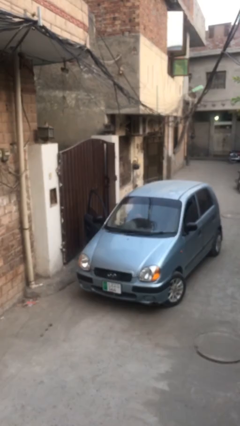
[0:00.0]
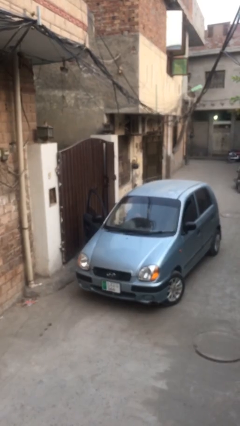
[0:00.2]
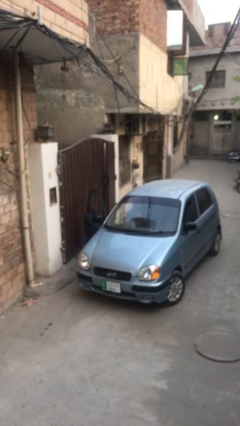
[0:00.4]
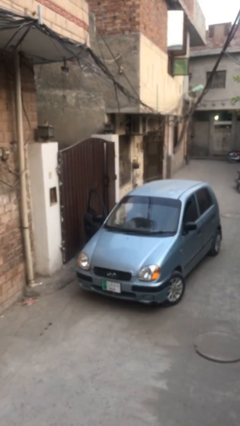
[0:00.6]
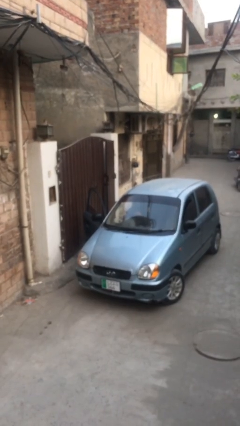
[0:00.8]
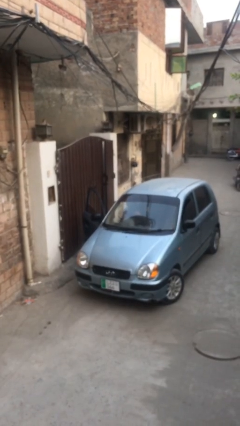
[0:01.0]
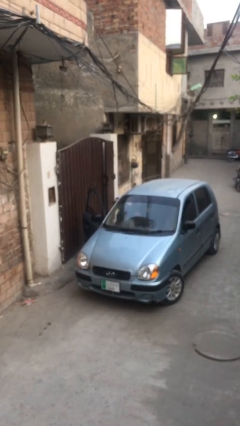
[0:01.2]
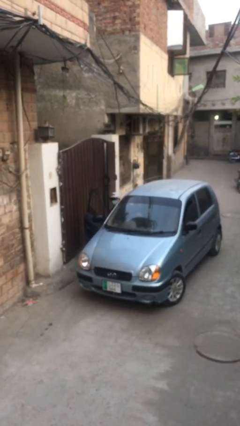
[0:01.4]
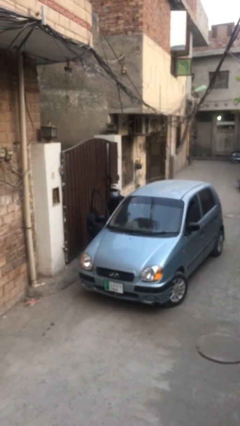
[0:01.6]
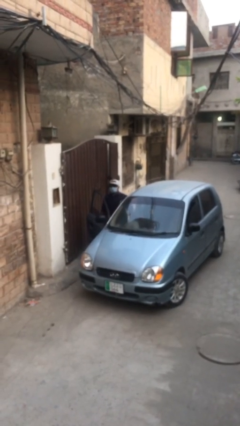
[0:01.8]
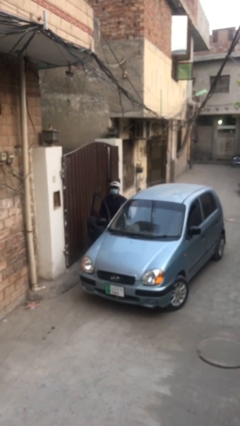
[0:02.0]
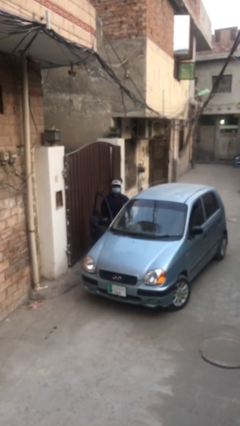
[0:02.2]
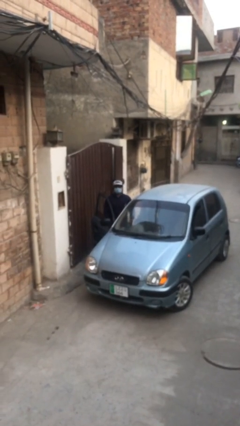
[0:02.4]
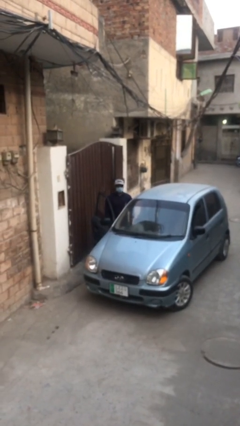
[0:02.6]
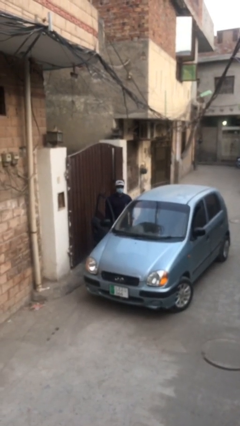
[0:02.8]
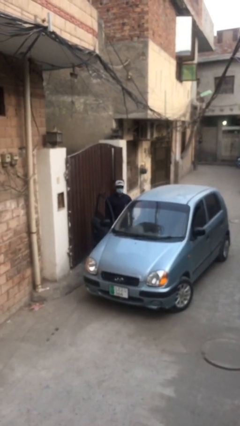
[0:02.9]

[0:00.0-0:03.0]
person exits car

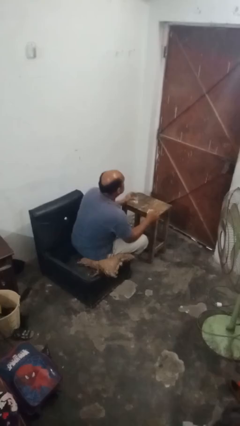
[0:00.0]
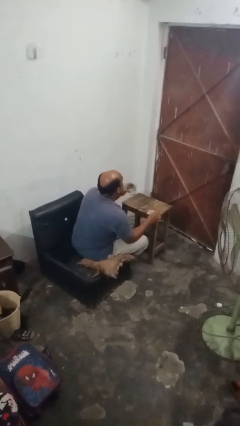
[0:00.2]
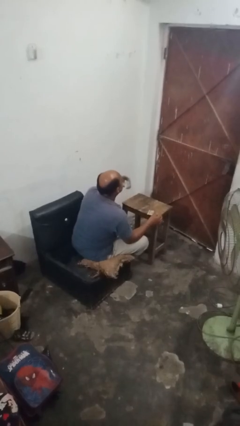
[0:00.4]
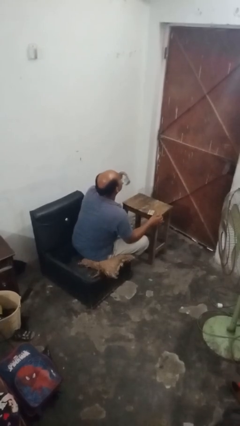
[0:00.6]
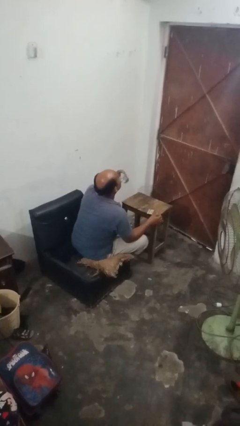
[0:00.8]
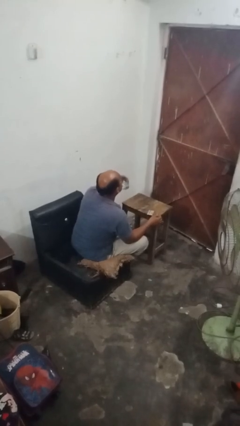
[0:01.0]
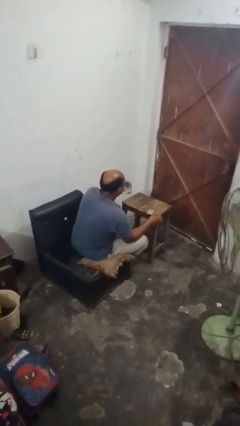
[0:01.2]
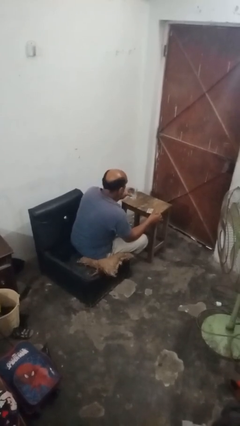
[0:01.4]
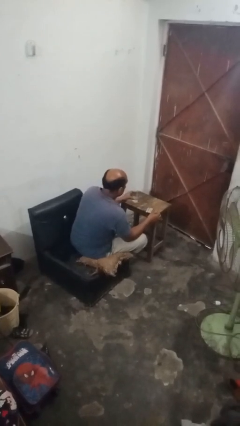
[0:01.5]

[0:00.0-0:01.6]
person drinks from cup

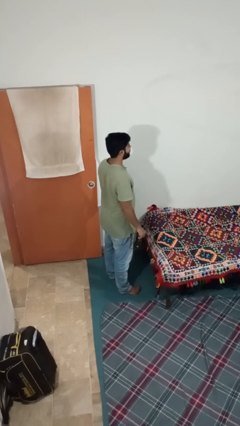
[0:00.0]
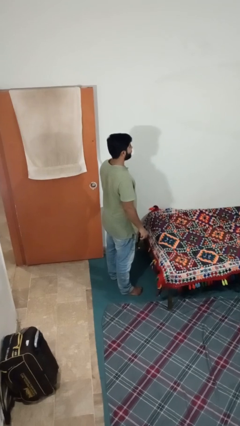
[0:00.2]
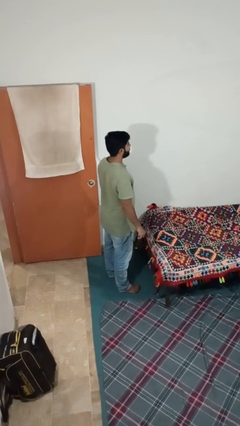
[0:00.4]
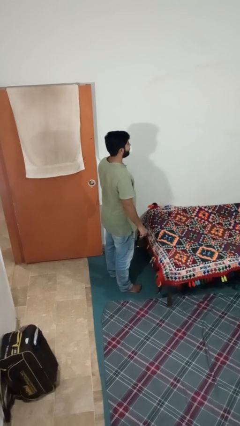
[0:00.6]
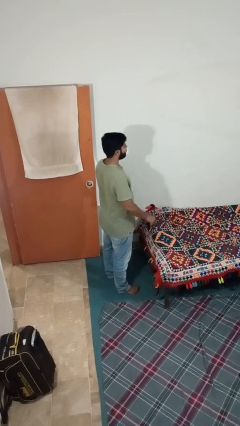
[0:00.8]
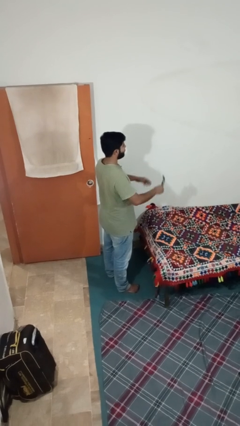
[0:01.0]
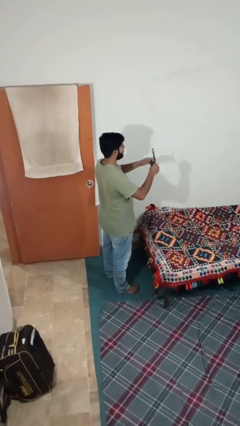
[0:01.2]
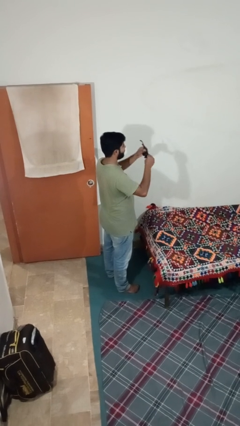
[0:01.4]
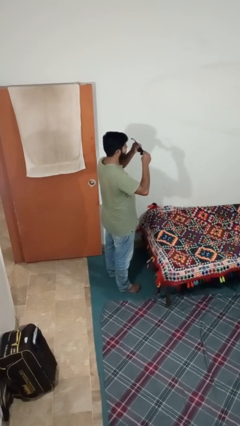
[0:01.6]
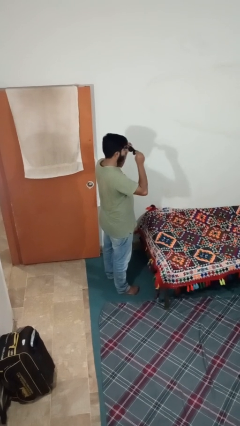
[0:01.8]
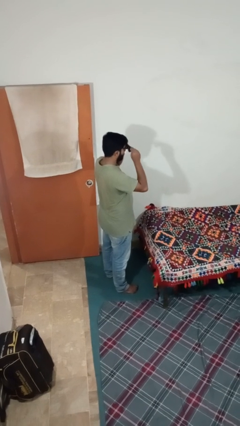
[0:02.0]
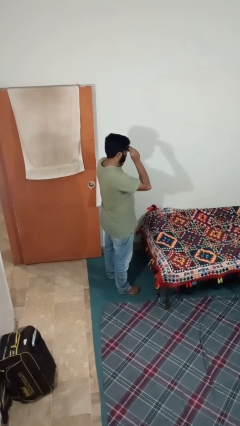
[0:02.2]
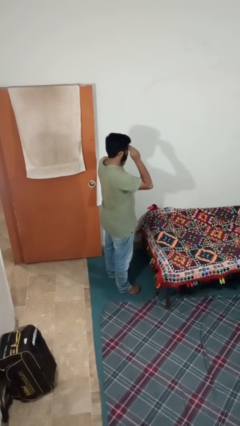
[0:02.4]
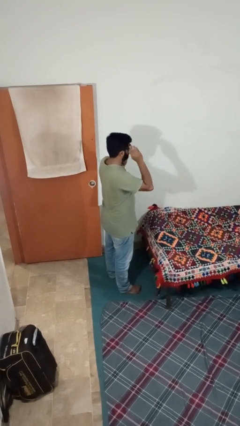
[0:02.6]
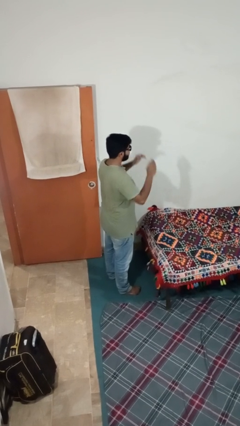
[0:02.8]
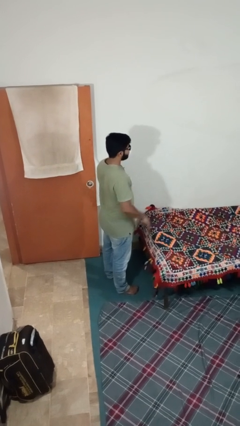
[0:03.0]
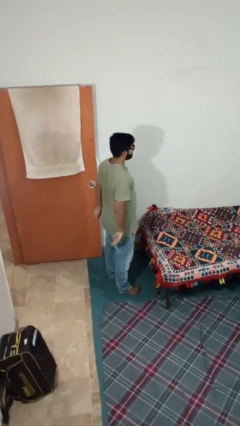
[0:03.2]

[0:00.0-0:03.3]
person puts on sunglasses

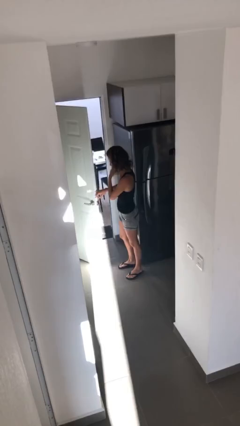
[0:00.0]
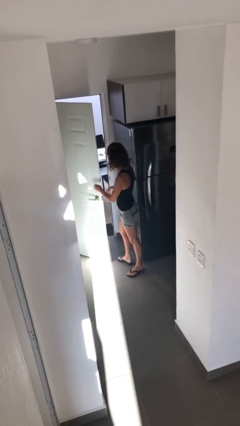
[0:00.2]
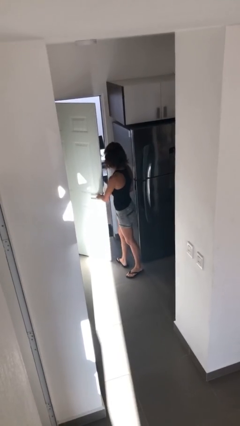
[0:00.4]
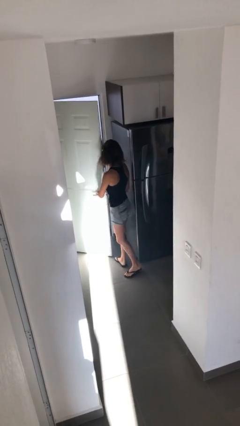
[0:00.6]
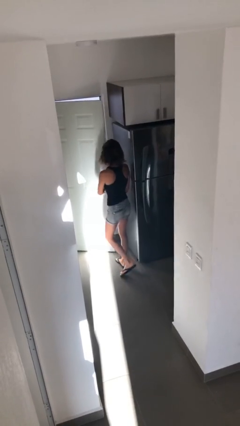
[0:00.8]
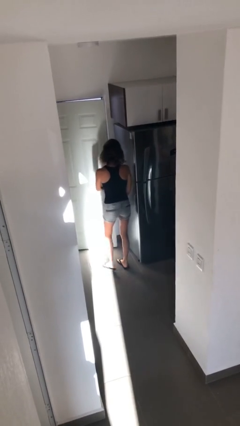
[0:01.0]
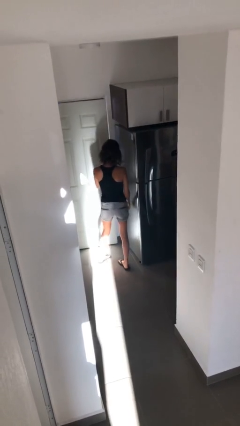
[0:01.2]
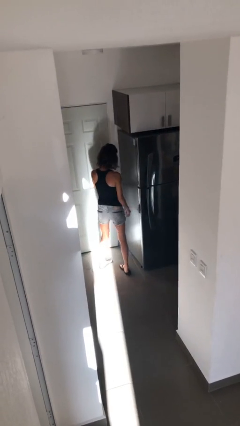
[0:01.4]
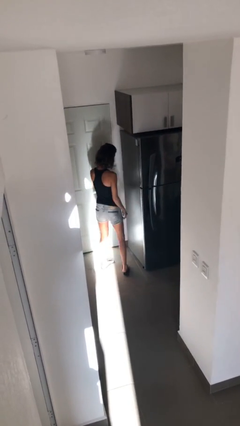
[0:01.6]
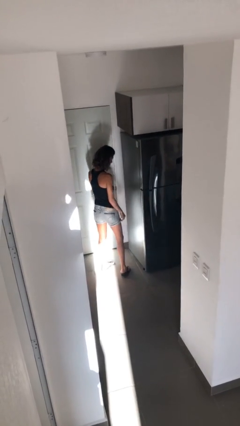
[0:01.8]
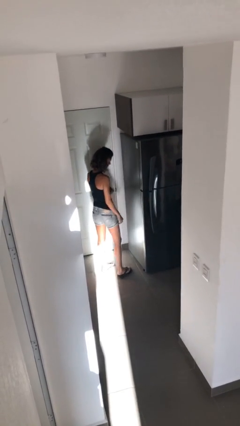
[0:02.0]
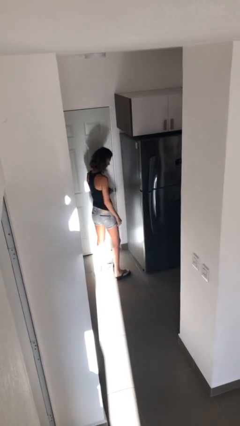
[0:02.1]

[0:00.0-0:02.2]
person closes facility door

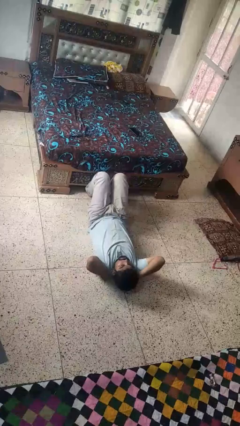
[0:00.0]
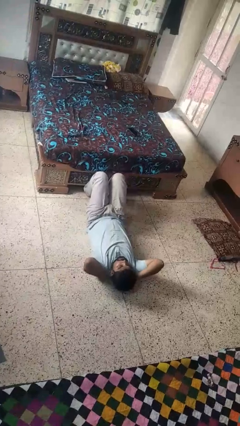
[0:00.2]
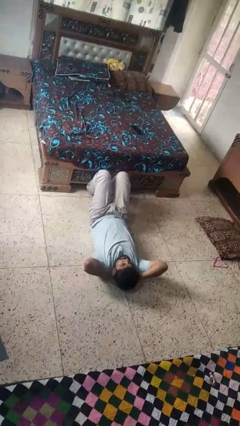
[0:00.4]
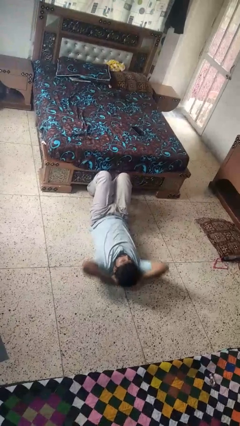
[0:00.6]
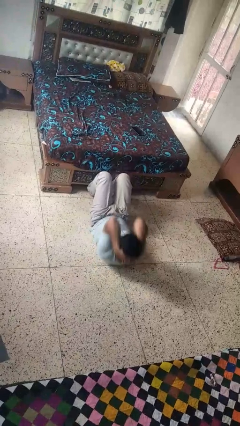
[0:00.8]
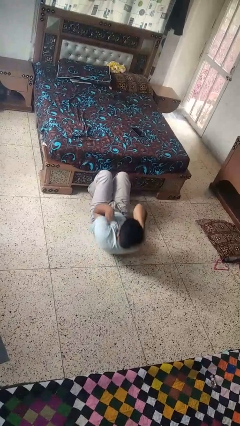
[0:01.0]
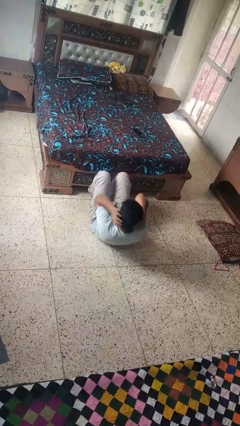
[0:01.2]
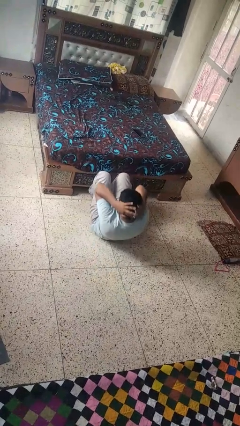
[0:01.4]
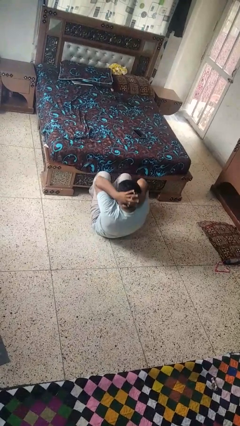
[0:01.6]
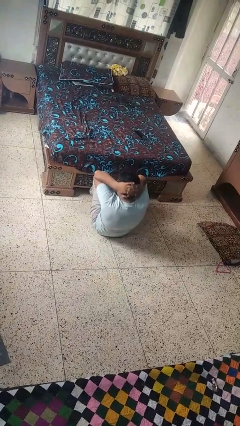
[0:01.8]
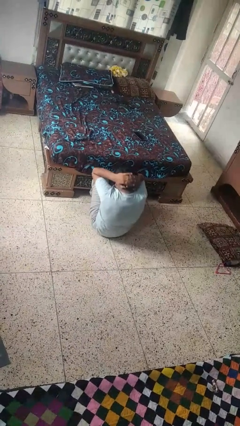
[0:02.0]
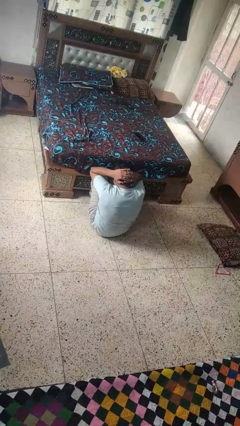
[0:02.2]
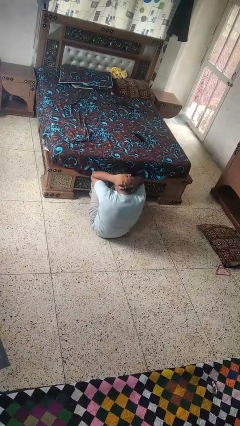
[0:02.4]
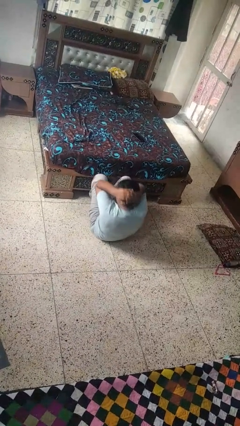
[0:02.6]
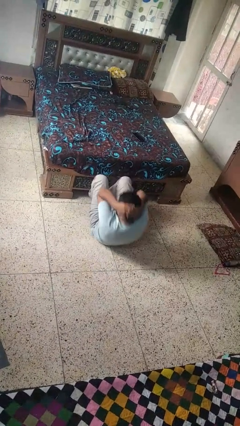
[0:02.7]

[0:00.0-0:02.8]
person exercises with situp

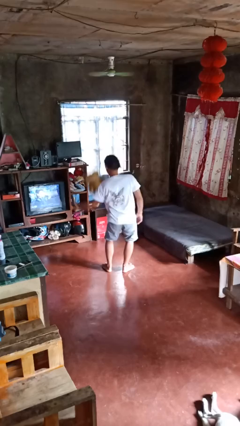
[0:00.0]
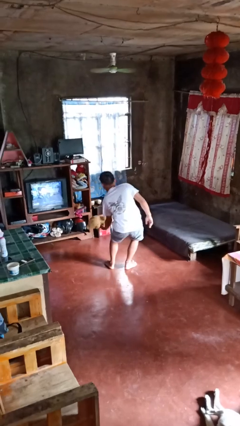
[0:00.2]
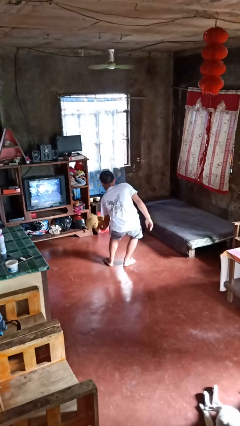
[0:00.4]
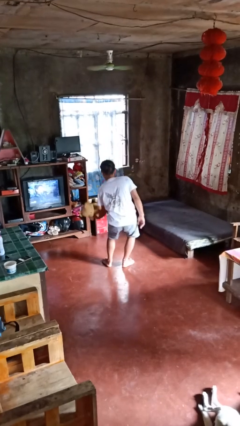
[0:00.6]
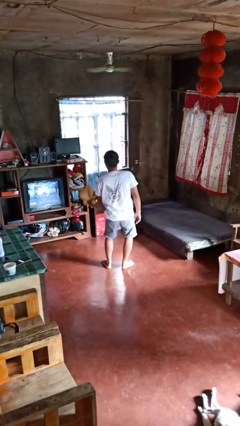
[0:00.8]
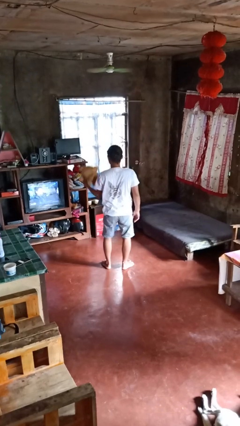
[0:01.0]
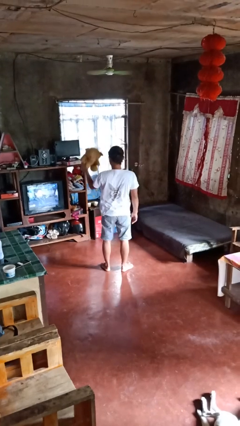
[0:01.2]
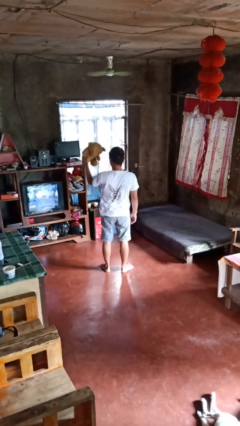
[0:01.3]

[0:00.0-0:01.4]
person catches dropped object

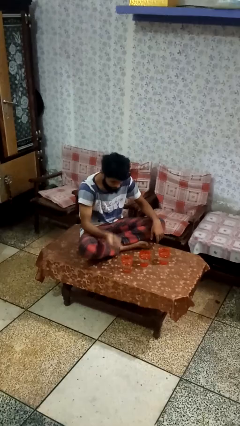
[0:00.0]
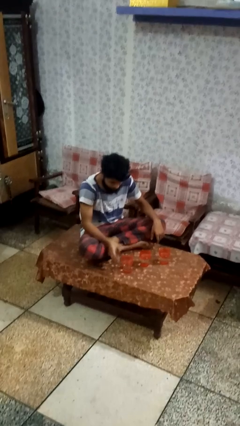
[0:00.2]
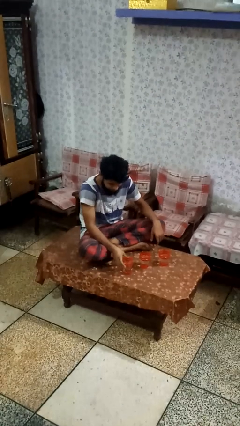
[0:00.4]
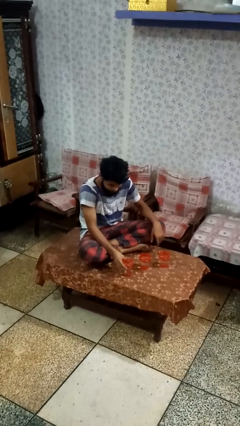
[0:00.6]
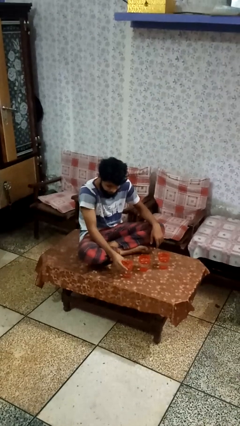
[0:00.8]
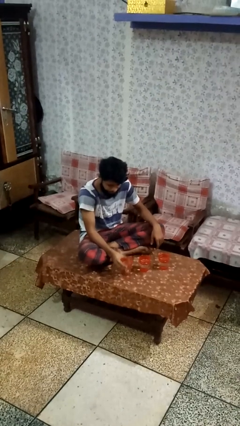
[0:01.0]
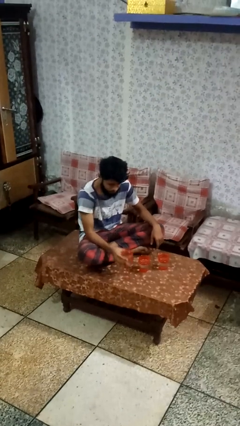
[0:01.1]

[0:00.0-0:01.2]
person picks up object from table

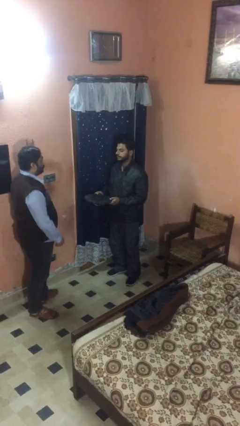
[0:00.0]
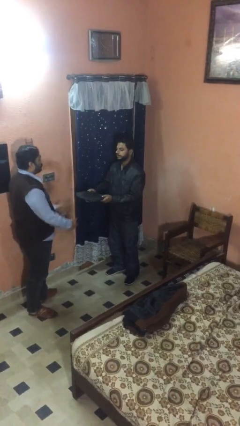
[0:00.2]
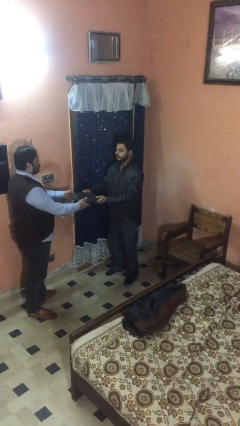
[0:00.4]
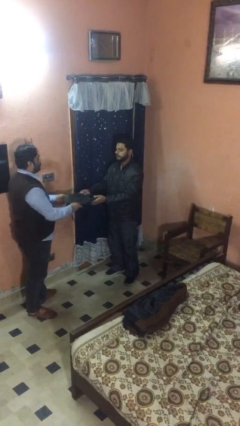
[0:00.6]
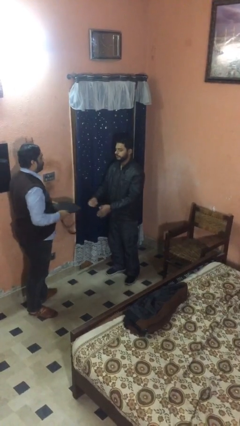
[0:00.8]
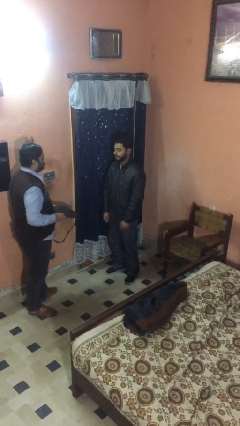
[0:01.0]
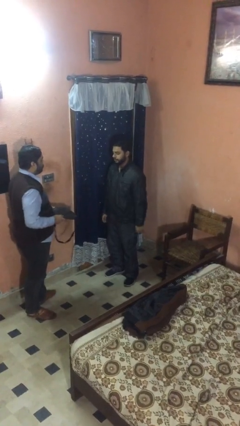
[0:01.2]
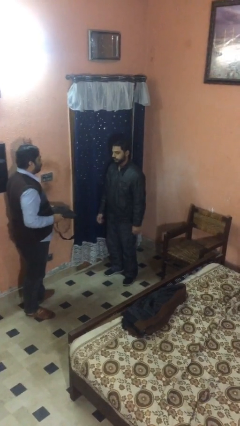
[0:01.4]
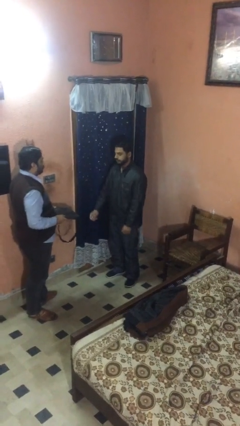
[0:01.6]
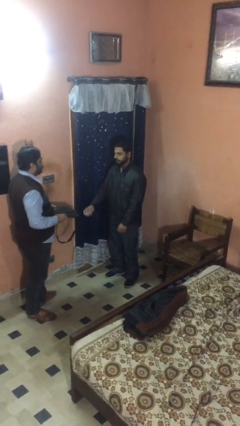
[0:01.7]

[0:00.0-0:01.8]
person transfers object to person
